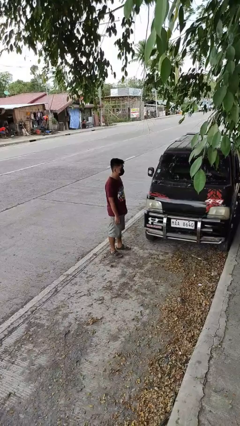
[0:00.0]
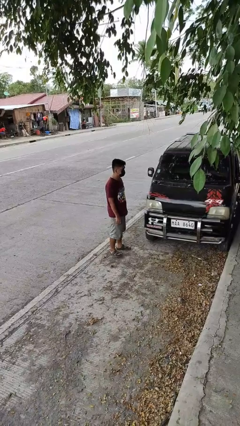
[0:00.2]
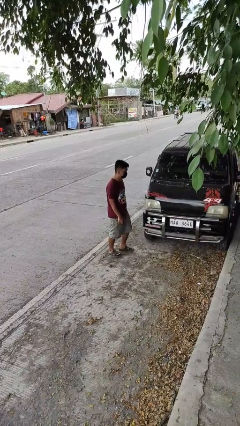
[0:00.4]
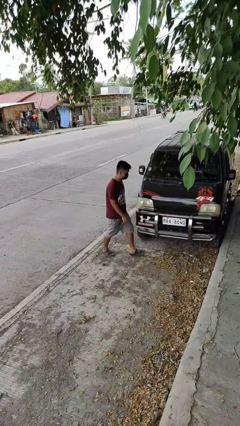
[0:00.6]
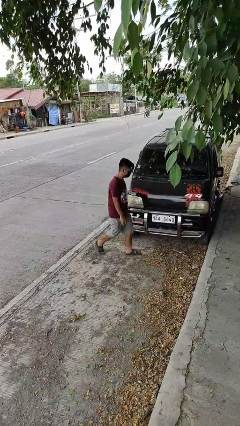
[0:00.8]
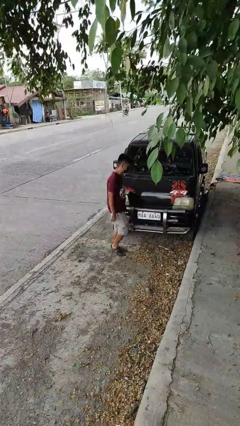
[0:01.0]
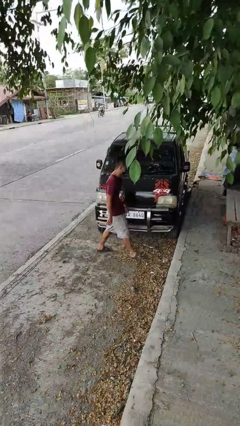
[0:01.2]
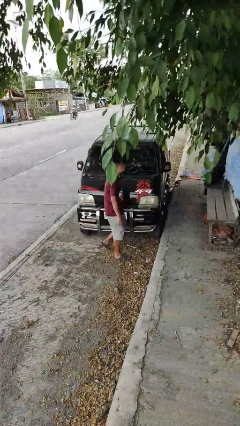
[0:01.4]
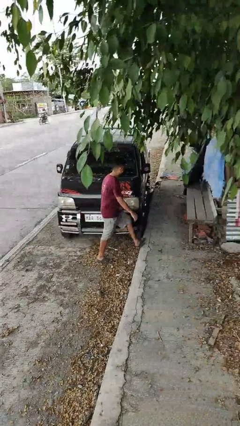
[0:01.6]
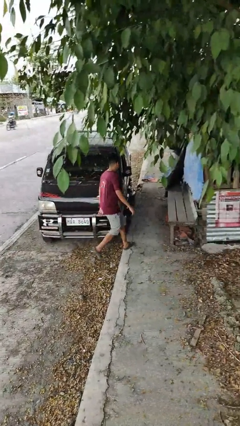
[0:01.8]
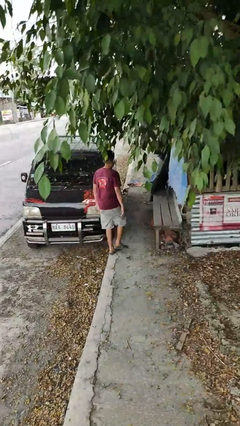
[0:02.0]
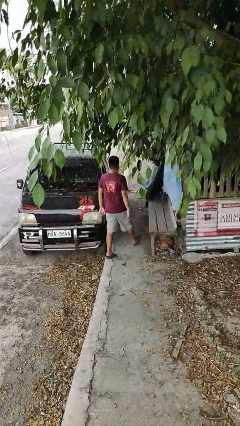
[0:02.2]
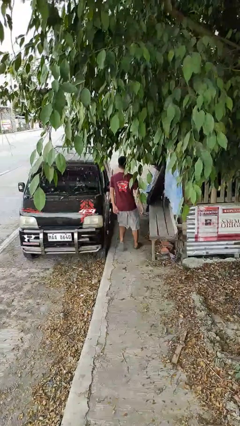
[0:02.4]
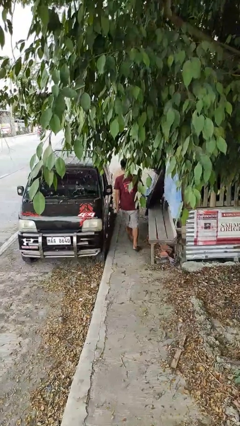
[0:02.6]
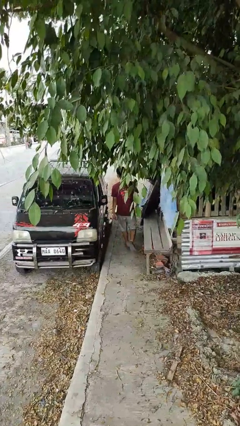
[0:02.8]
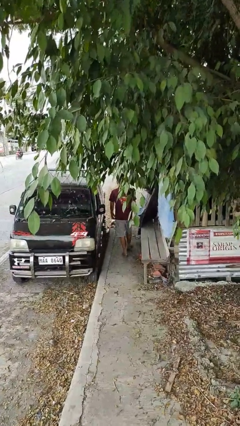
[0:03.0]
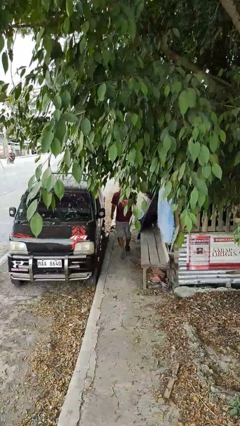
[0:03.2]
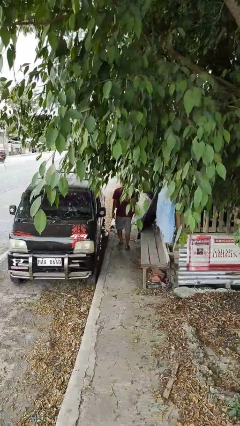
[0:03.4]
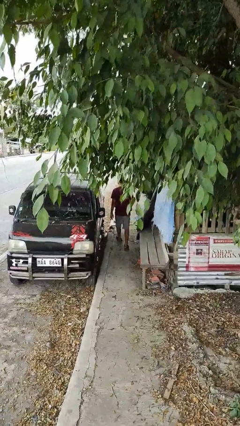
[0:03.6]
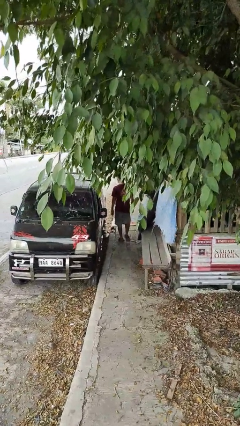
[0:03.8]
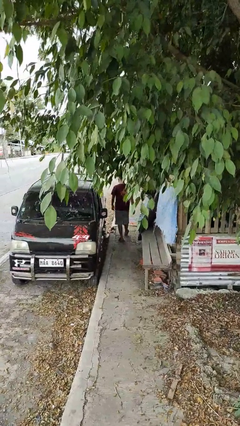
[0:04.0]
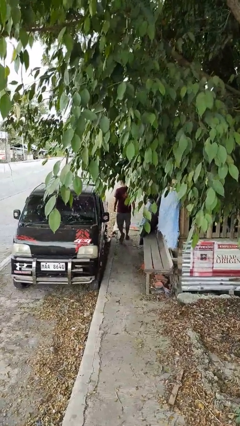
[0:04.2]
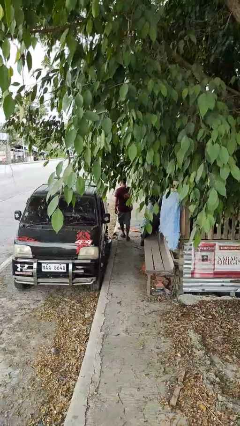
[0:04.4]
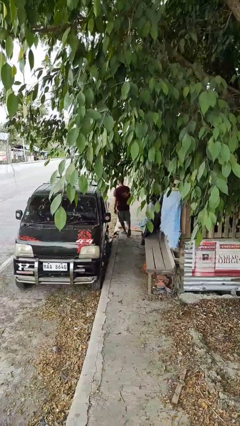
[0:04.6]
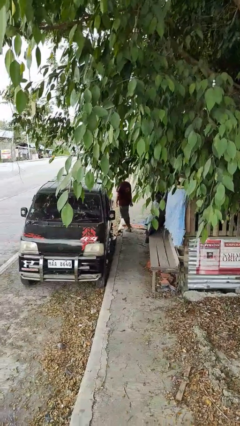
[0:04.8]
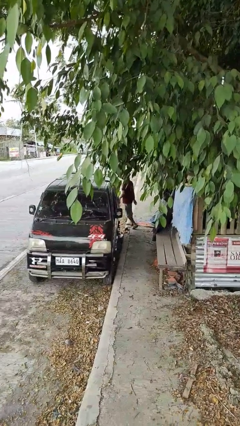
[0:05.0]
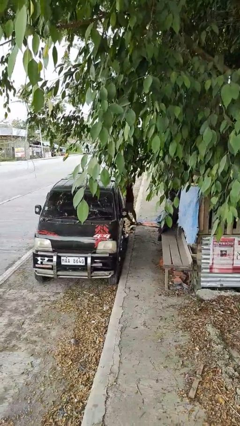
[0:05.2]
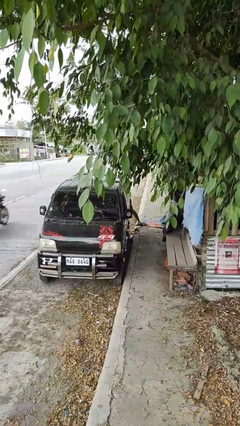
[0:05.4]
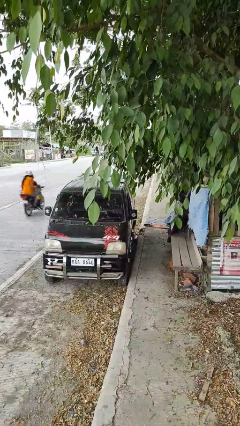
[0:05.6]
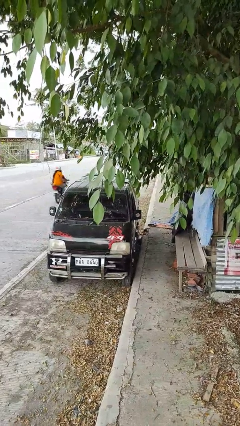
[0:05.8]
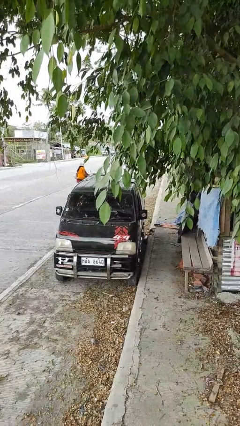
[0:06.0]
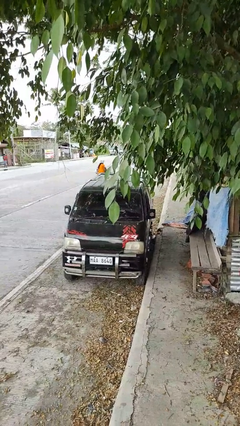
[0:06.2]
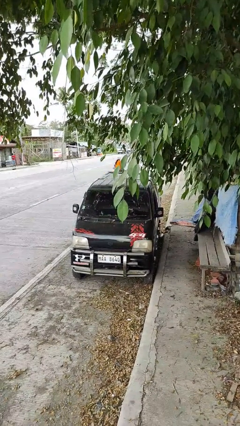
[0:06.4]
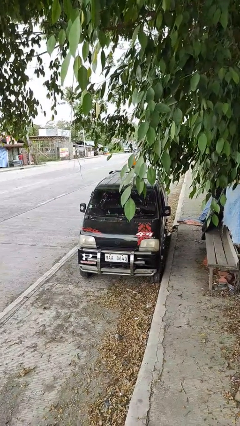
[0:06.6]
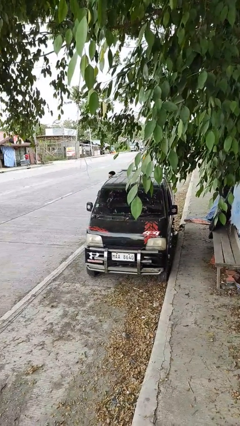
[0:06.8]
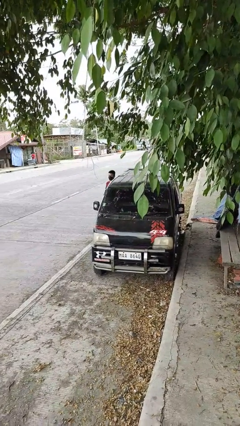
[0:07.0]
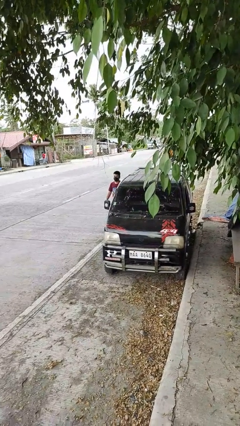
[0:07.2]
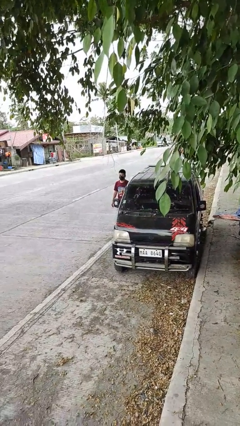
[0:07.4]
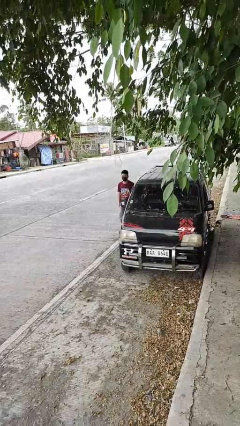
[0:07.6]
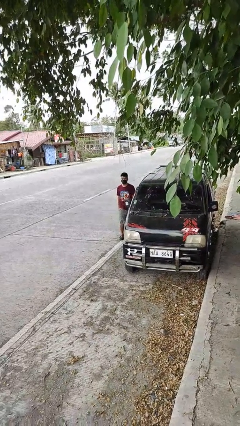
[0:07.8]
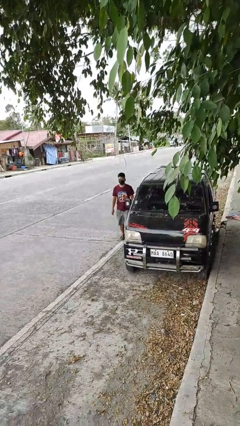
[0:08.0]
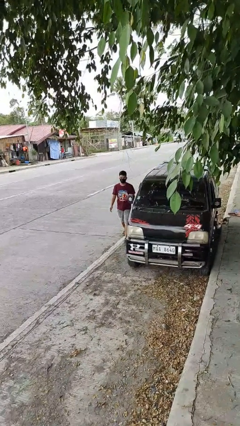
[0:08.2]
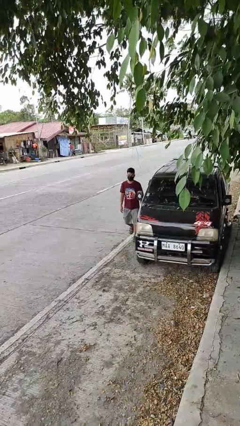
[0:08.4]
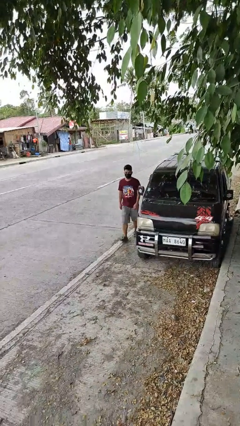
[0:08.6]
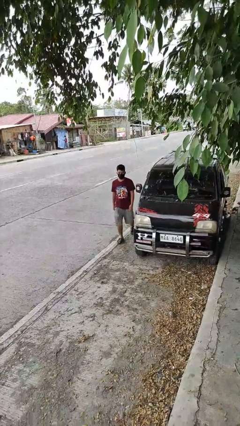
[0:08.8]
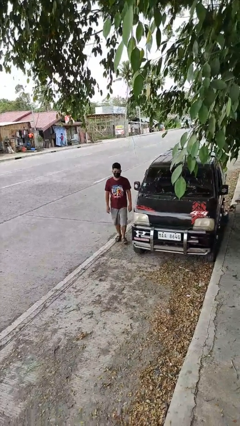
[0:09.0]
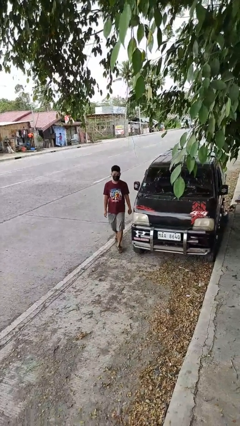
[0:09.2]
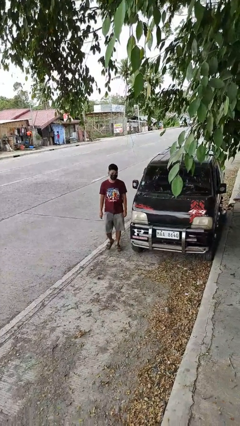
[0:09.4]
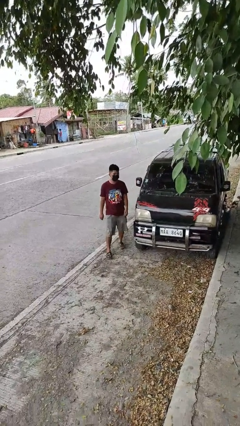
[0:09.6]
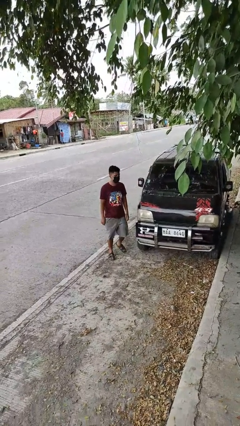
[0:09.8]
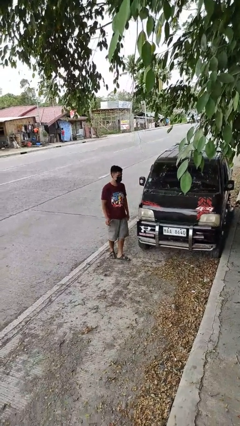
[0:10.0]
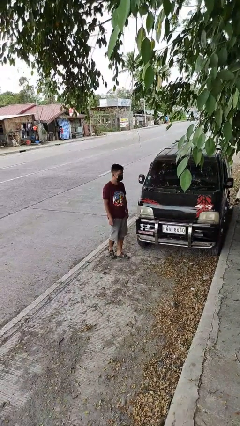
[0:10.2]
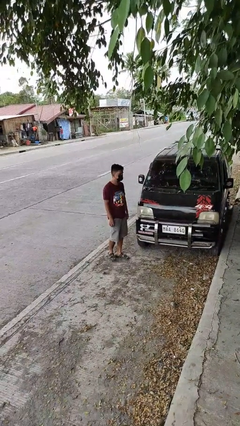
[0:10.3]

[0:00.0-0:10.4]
person walks around car

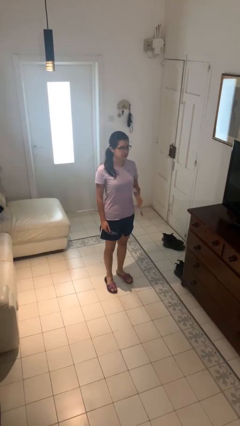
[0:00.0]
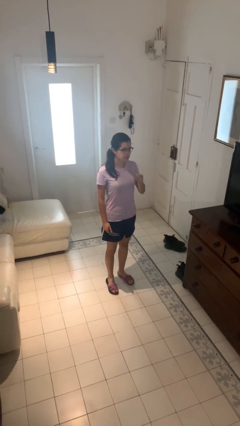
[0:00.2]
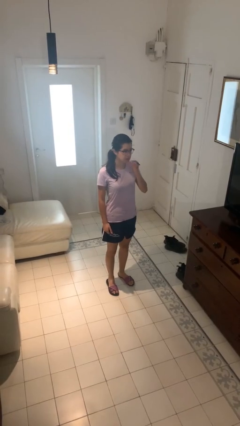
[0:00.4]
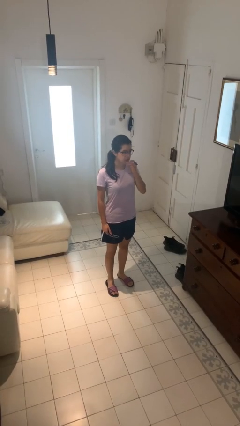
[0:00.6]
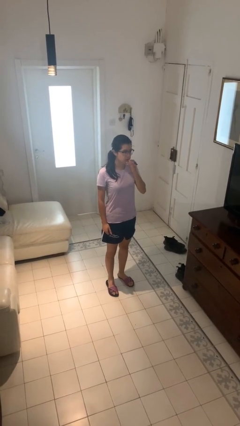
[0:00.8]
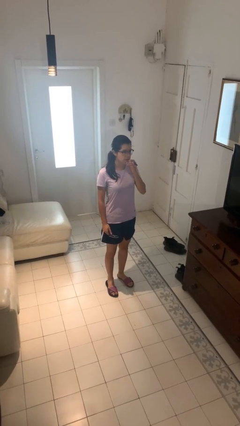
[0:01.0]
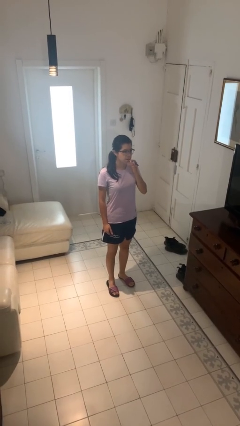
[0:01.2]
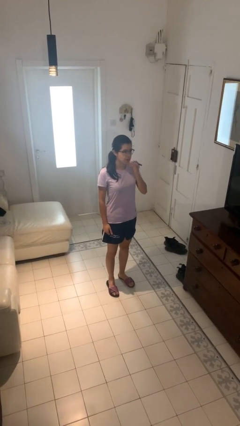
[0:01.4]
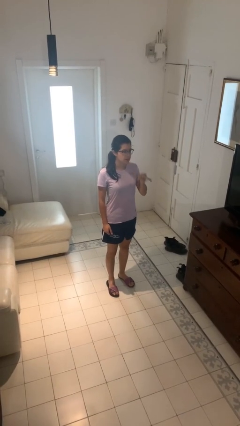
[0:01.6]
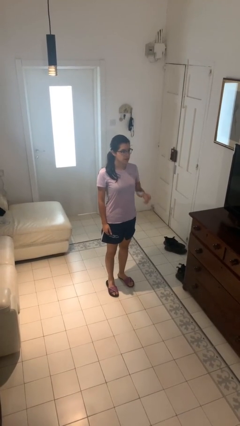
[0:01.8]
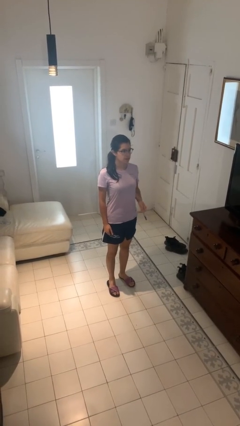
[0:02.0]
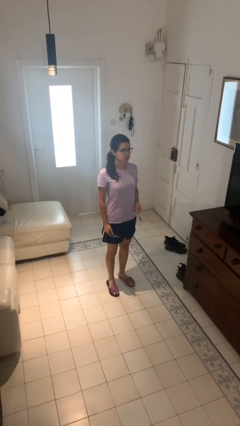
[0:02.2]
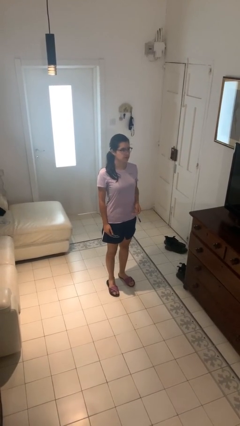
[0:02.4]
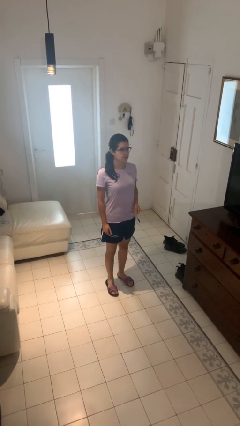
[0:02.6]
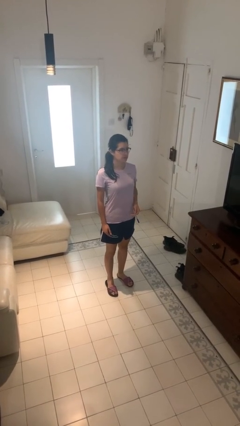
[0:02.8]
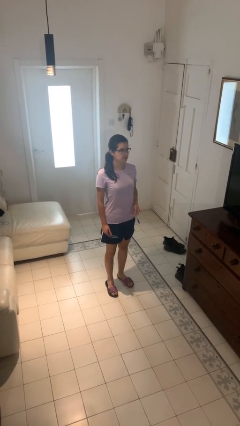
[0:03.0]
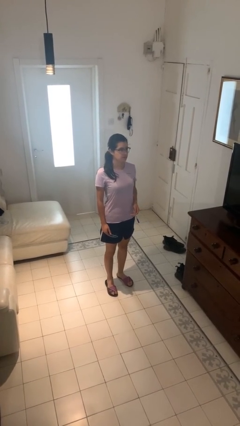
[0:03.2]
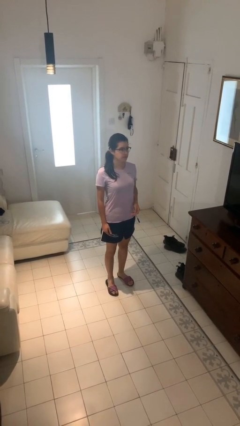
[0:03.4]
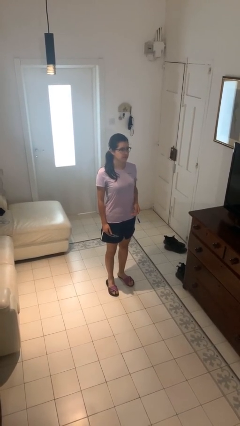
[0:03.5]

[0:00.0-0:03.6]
person vapes

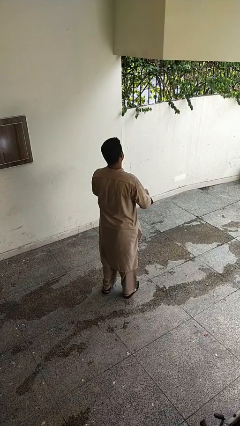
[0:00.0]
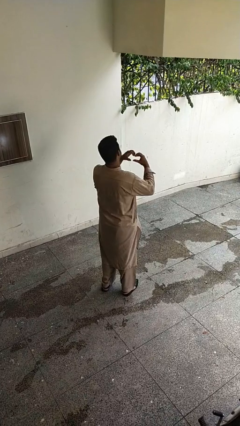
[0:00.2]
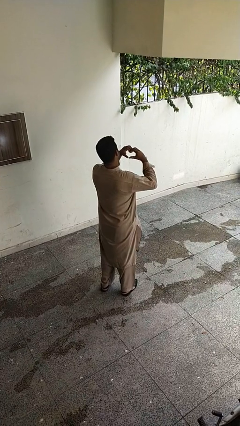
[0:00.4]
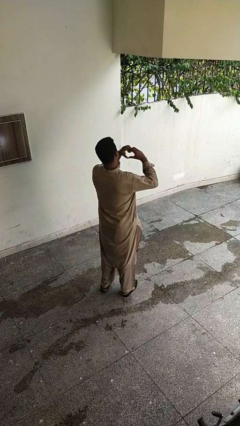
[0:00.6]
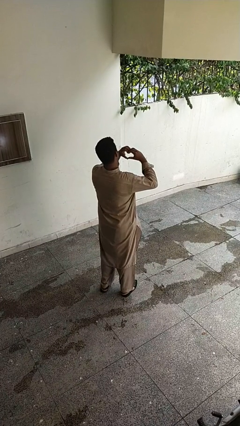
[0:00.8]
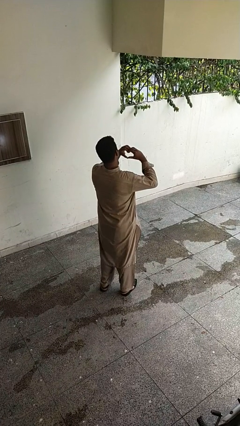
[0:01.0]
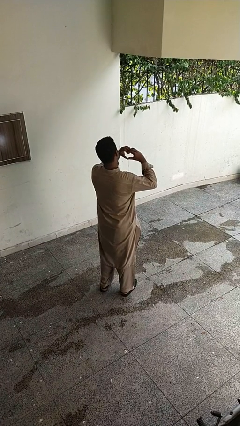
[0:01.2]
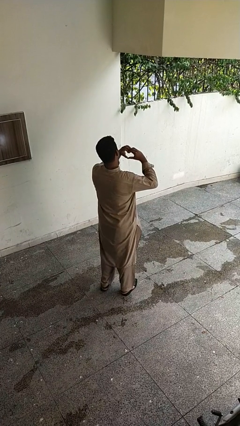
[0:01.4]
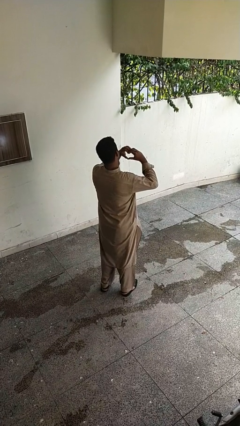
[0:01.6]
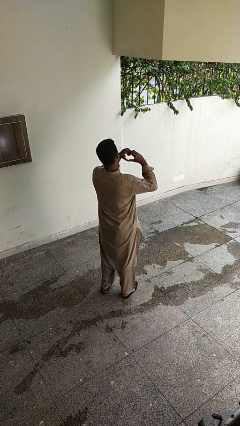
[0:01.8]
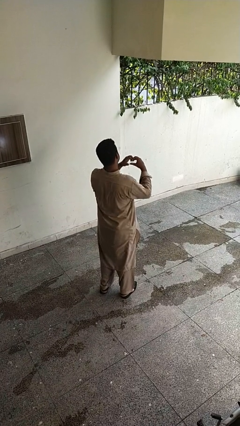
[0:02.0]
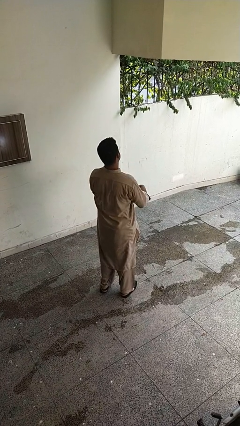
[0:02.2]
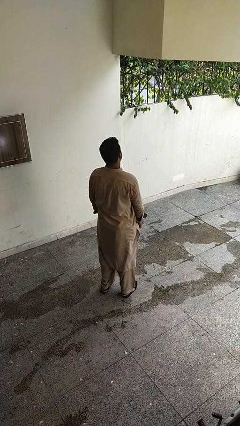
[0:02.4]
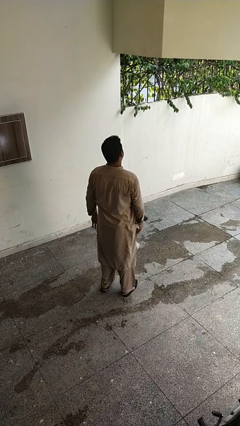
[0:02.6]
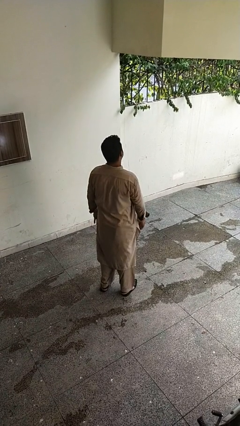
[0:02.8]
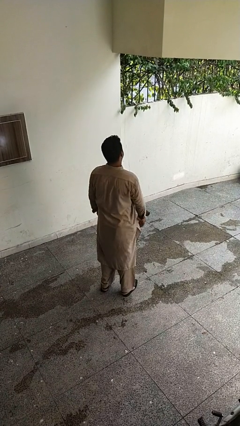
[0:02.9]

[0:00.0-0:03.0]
person gestures heart

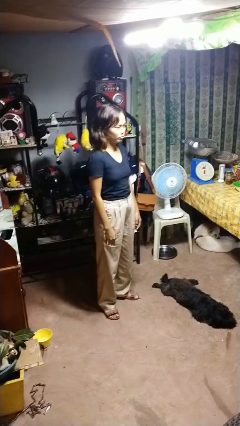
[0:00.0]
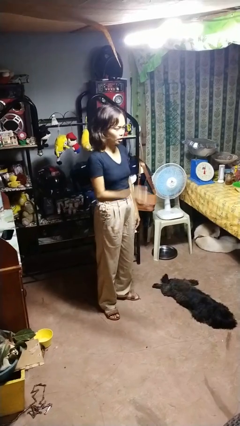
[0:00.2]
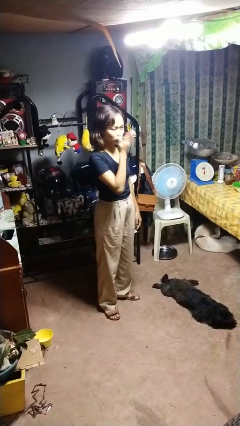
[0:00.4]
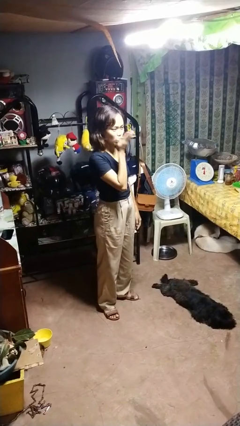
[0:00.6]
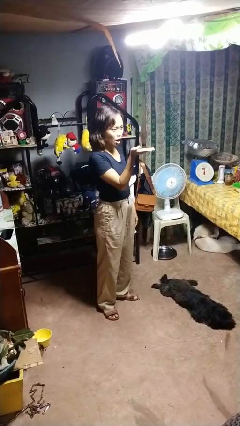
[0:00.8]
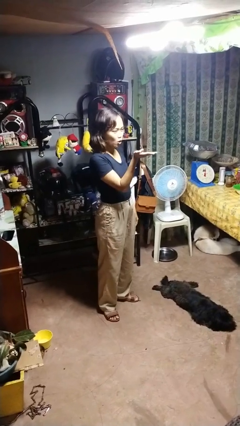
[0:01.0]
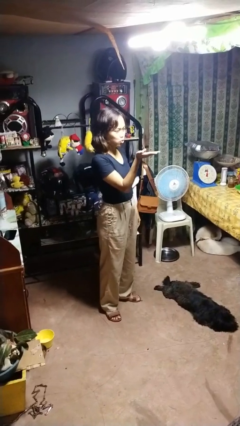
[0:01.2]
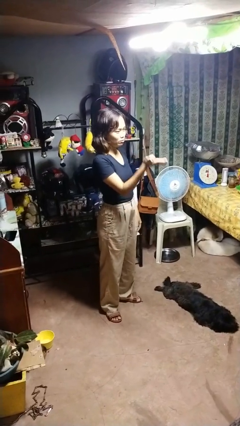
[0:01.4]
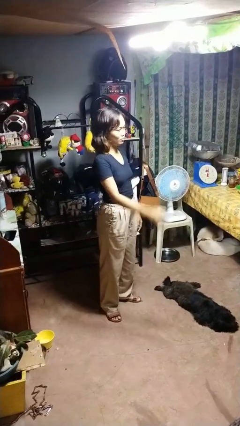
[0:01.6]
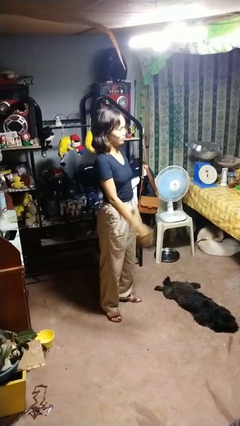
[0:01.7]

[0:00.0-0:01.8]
person gestures blow kiss
